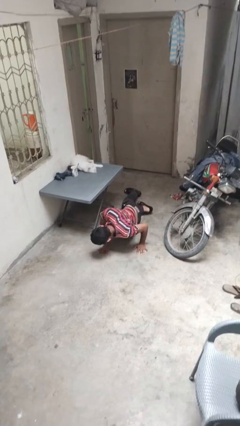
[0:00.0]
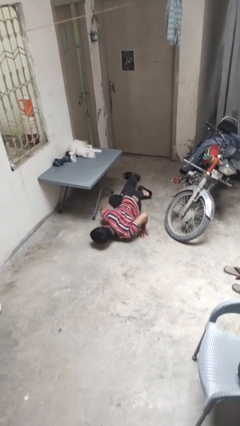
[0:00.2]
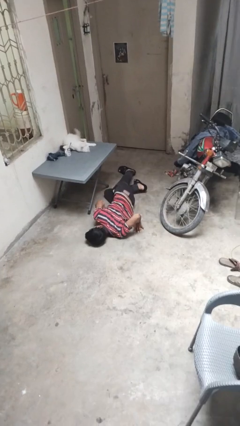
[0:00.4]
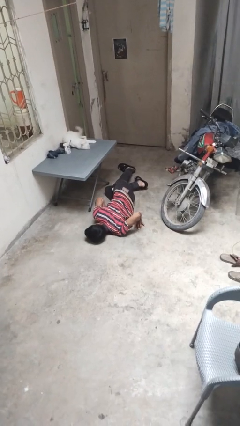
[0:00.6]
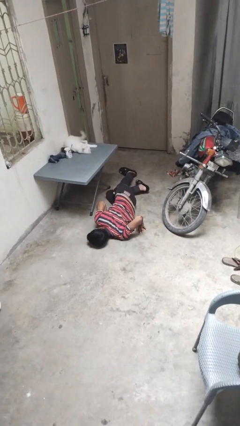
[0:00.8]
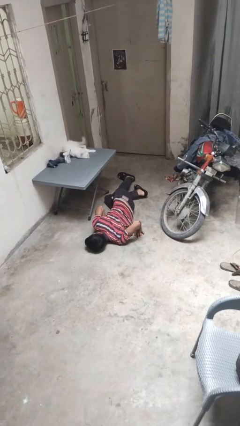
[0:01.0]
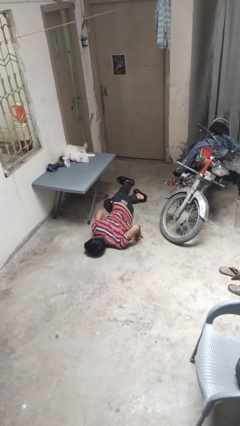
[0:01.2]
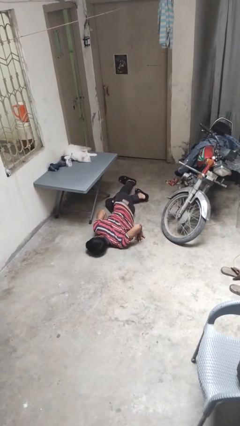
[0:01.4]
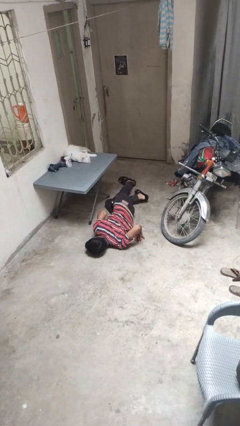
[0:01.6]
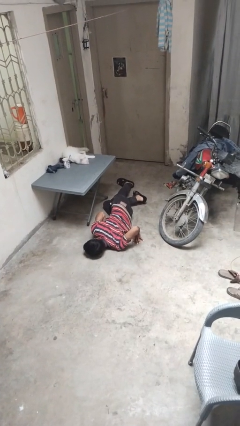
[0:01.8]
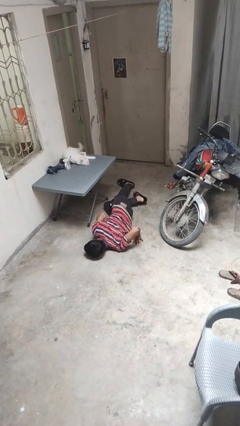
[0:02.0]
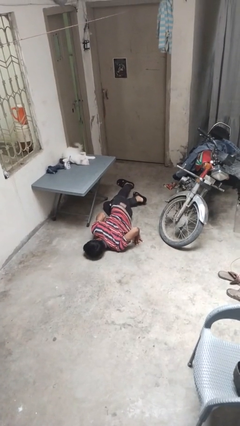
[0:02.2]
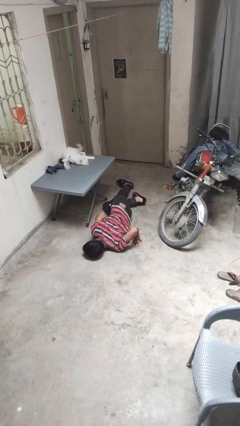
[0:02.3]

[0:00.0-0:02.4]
person lies down on floor

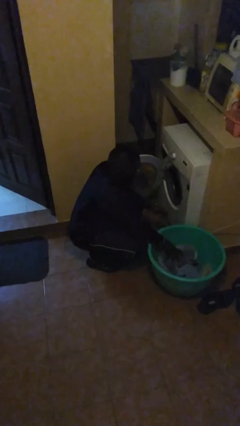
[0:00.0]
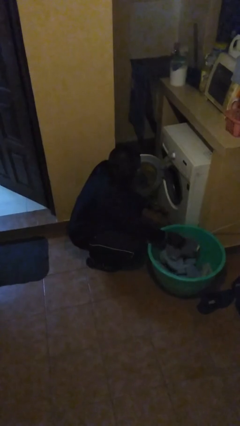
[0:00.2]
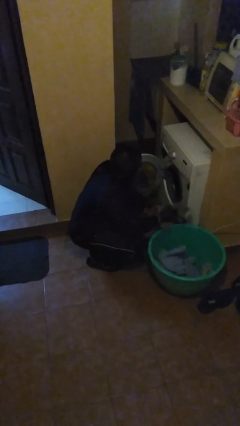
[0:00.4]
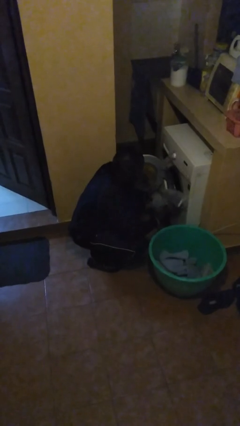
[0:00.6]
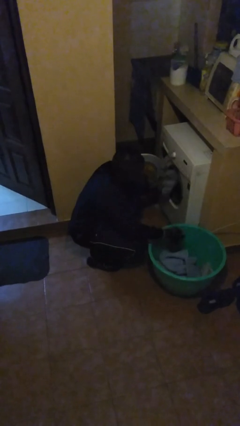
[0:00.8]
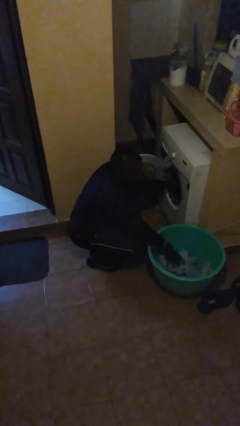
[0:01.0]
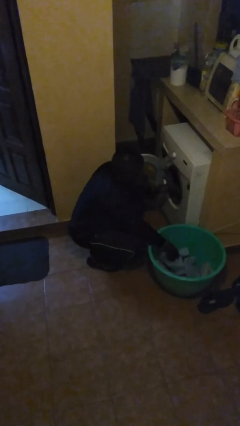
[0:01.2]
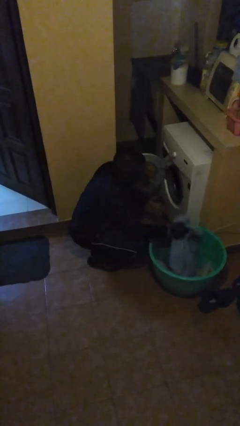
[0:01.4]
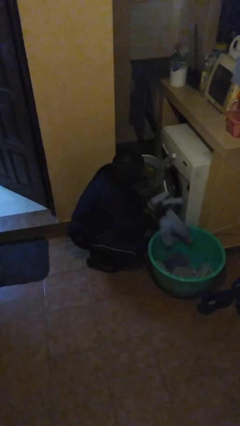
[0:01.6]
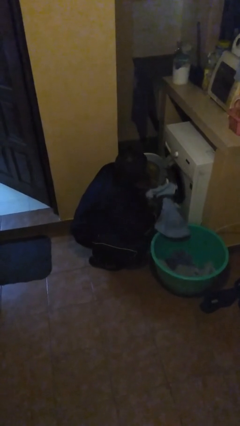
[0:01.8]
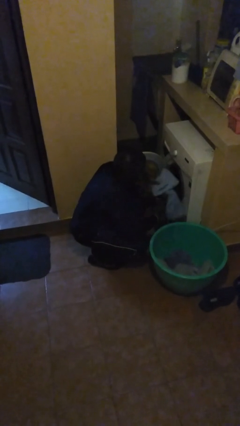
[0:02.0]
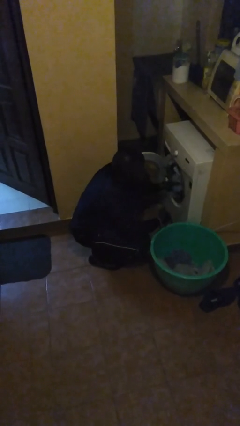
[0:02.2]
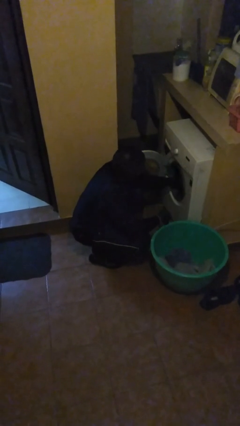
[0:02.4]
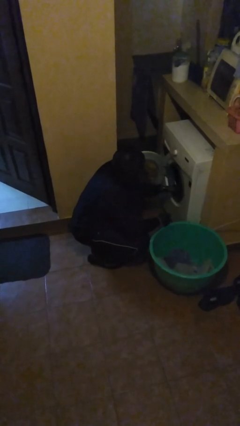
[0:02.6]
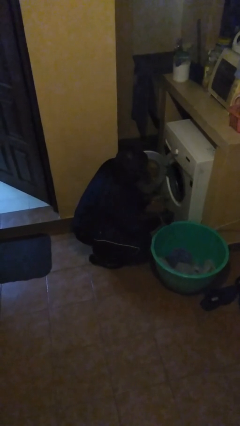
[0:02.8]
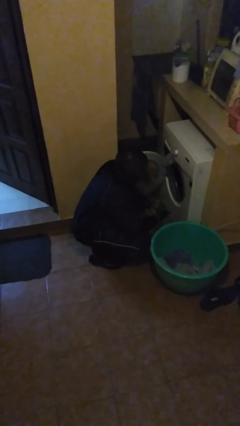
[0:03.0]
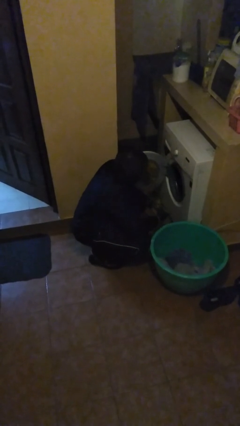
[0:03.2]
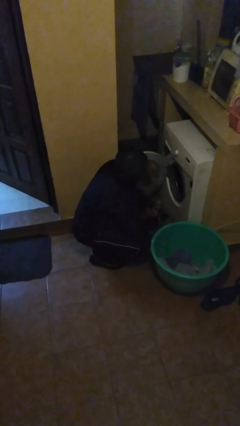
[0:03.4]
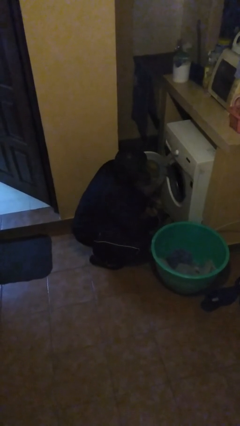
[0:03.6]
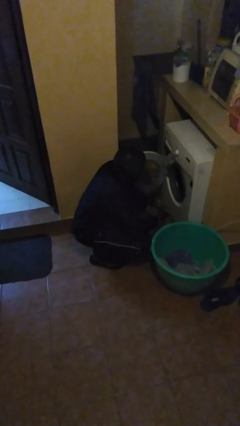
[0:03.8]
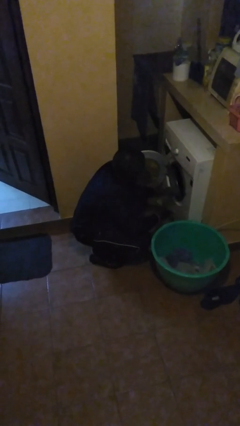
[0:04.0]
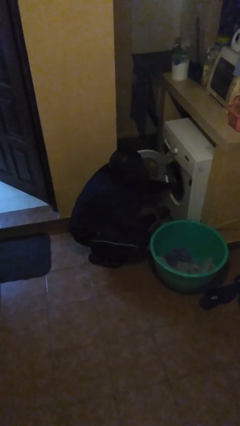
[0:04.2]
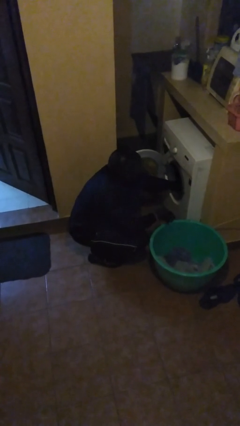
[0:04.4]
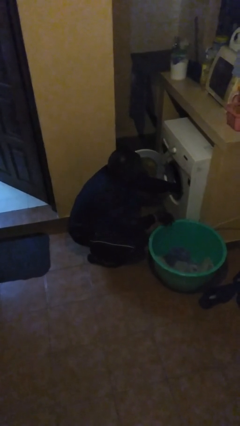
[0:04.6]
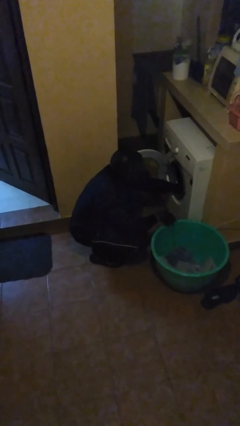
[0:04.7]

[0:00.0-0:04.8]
person loads clotheswasher

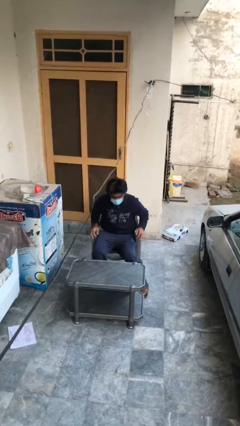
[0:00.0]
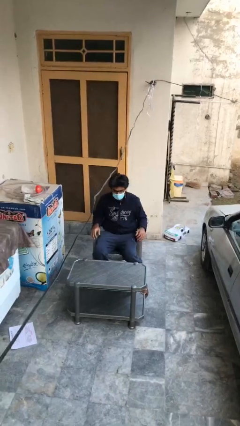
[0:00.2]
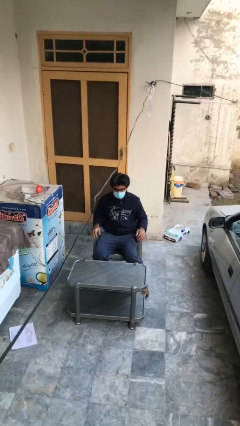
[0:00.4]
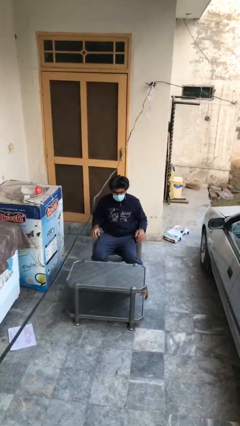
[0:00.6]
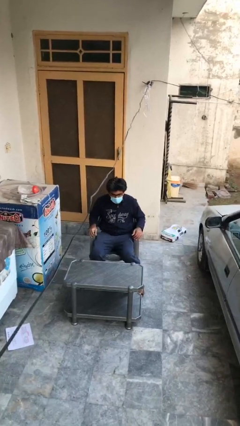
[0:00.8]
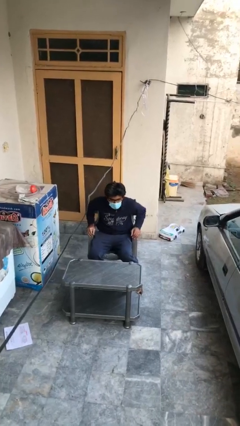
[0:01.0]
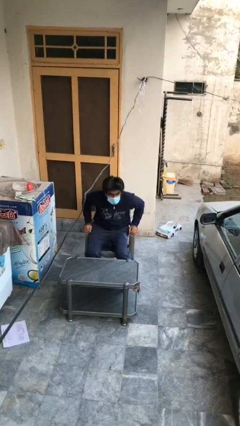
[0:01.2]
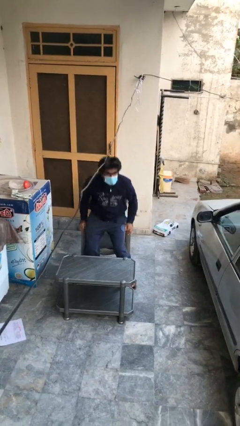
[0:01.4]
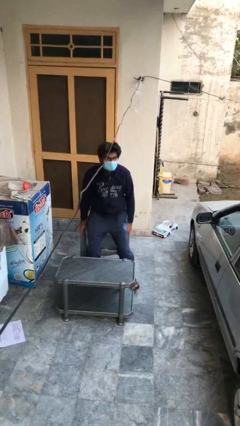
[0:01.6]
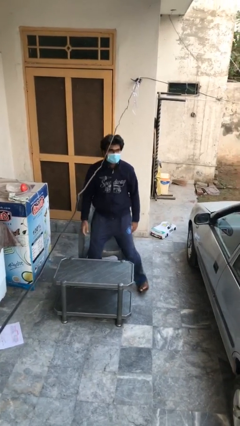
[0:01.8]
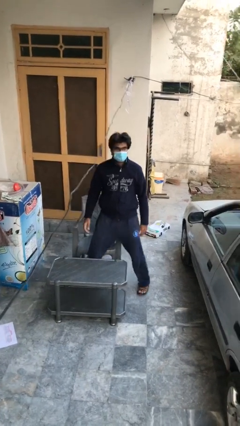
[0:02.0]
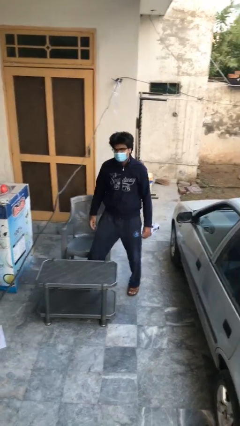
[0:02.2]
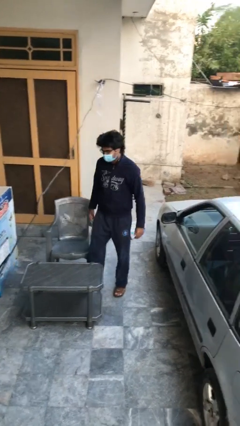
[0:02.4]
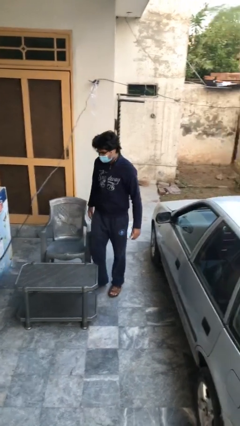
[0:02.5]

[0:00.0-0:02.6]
person stands up

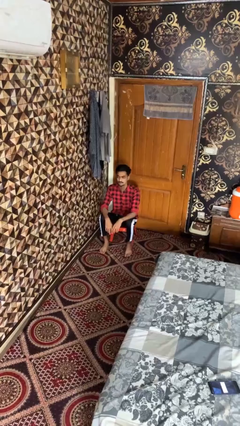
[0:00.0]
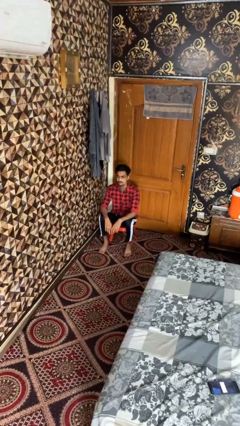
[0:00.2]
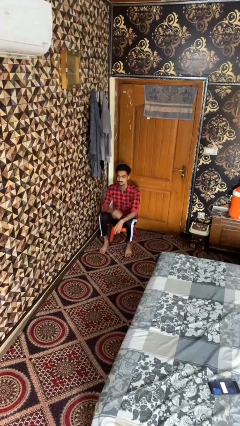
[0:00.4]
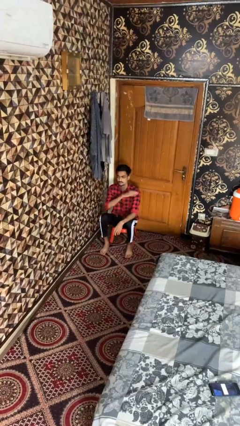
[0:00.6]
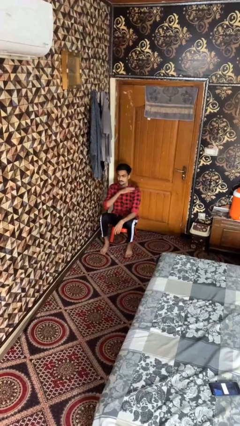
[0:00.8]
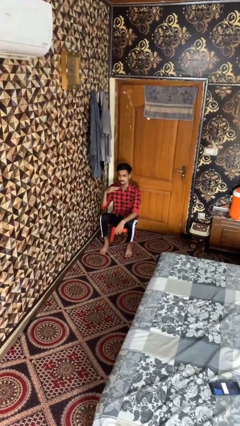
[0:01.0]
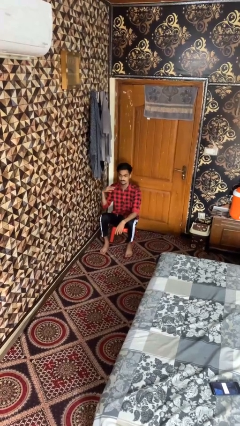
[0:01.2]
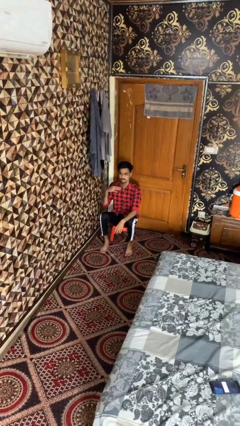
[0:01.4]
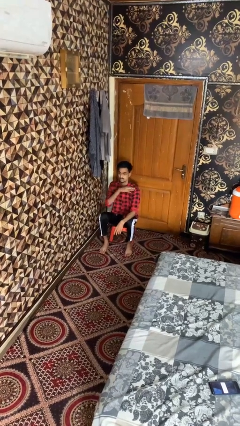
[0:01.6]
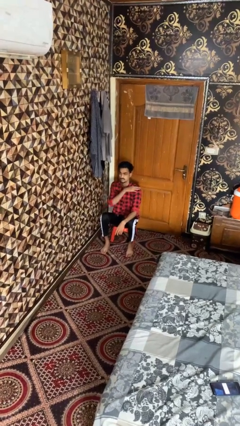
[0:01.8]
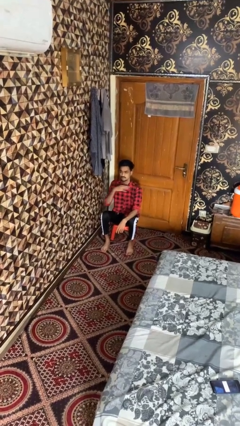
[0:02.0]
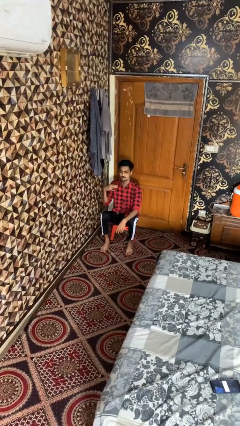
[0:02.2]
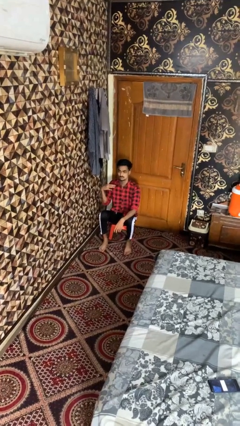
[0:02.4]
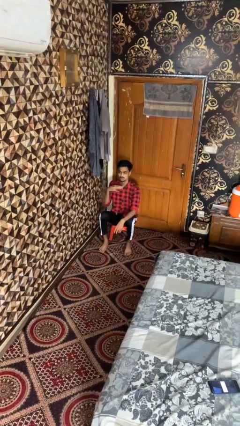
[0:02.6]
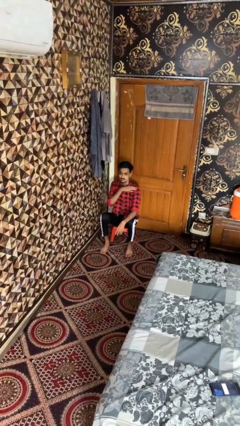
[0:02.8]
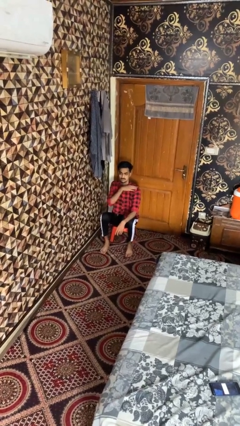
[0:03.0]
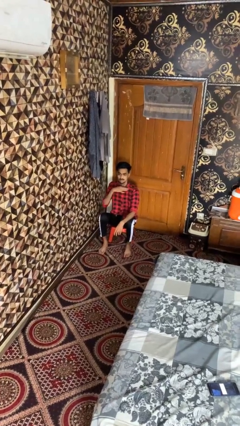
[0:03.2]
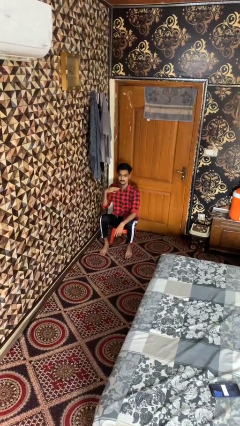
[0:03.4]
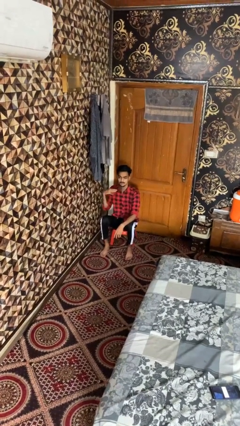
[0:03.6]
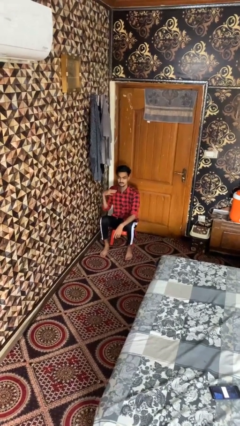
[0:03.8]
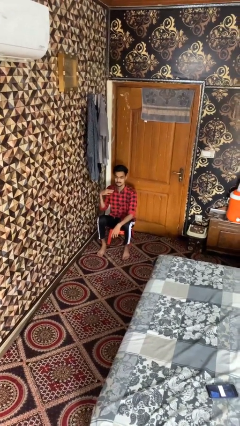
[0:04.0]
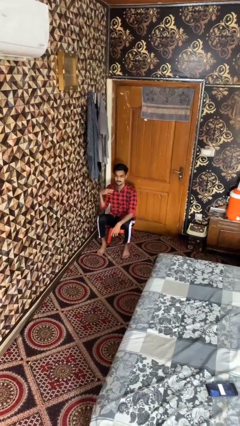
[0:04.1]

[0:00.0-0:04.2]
person gestures cut

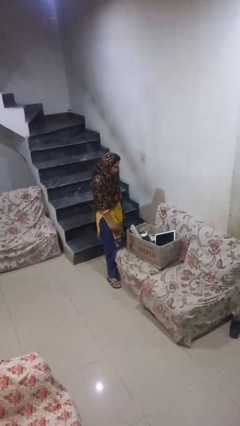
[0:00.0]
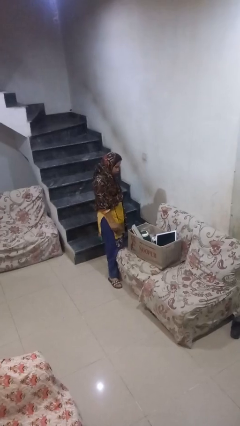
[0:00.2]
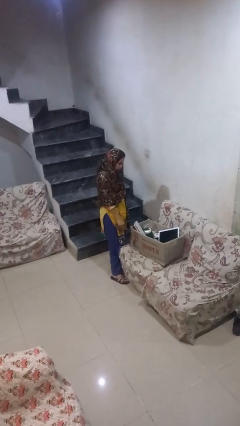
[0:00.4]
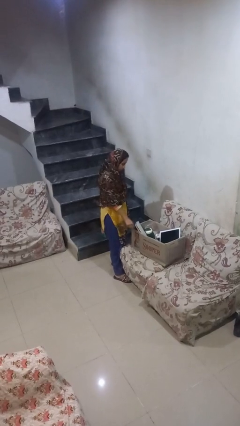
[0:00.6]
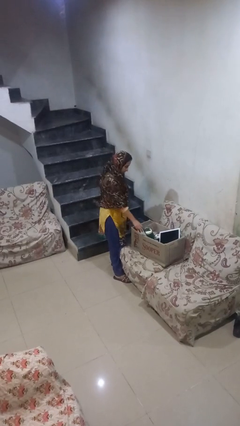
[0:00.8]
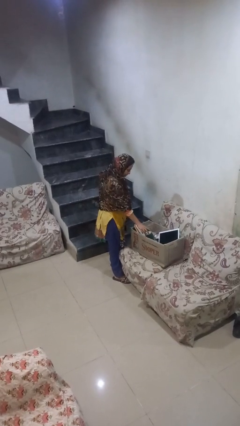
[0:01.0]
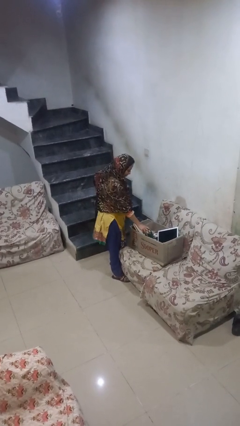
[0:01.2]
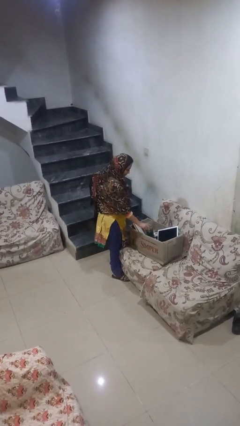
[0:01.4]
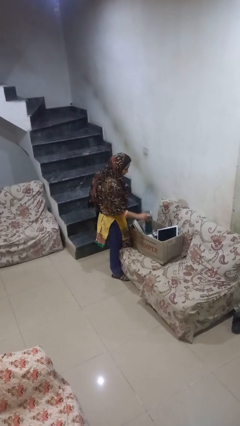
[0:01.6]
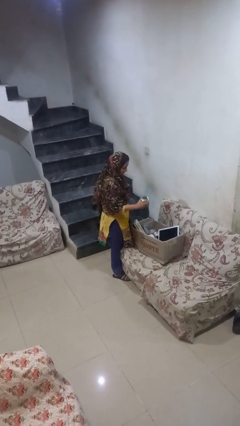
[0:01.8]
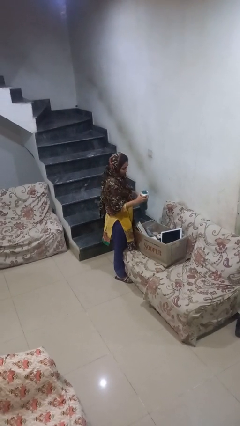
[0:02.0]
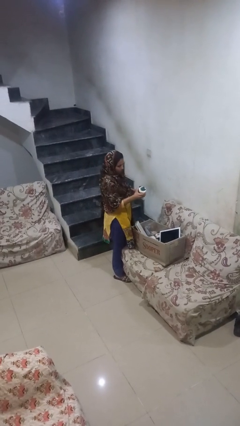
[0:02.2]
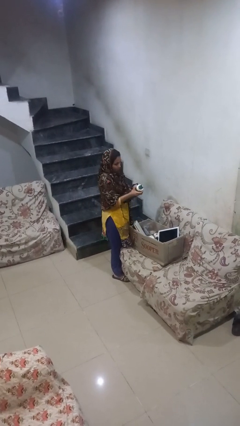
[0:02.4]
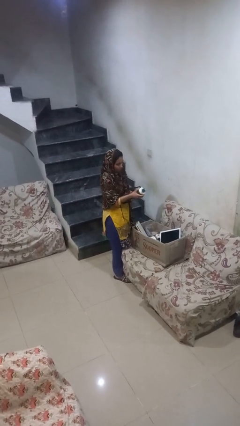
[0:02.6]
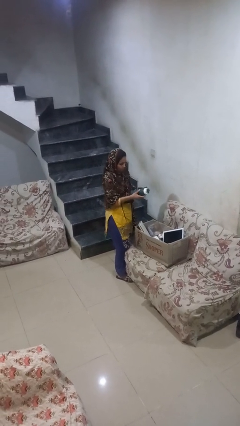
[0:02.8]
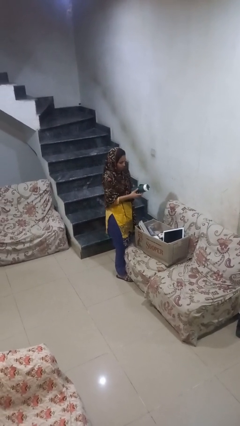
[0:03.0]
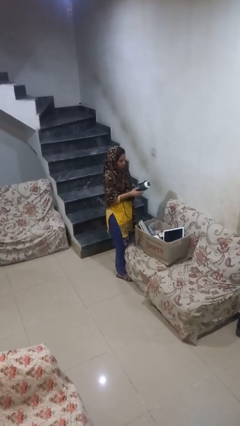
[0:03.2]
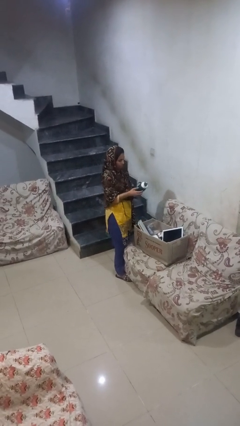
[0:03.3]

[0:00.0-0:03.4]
person takes object from box
